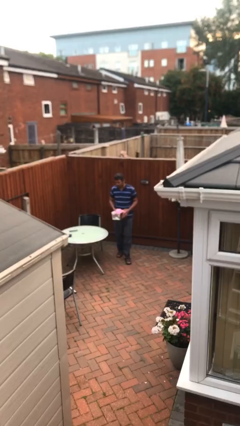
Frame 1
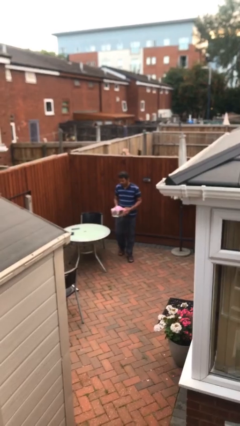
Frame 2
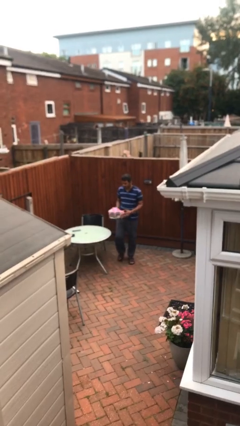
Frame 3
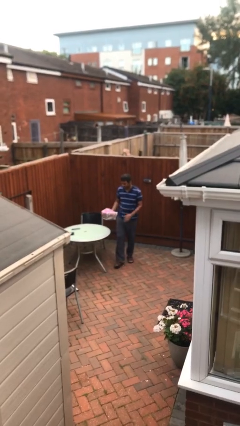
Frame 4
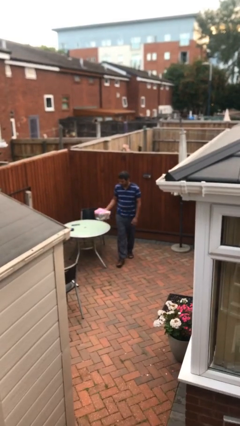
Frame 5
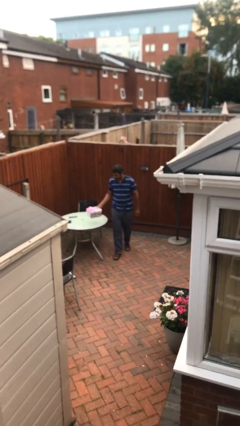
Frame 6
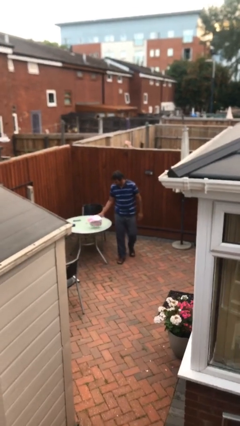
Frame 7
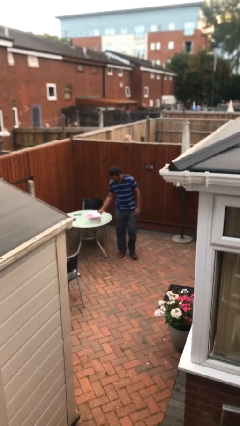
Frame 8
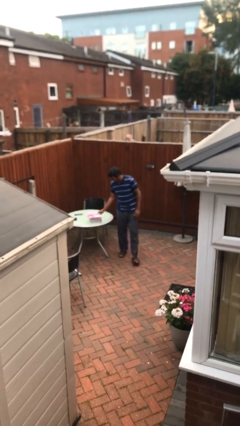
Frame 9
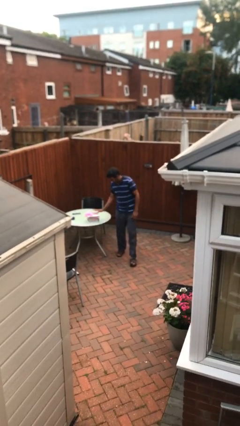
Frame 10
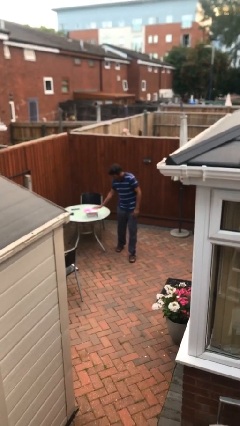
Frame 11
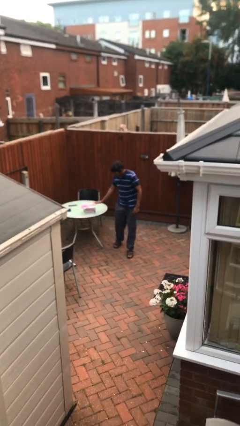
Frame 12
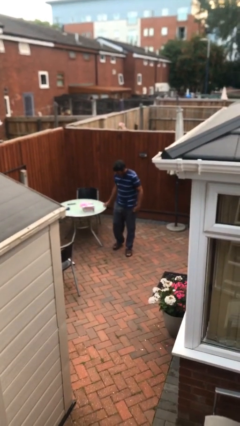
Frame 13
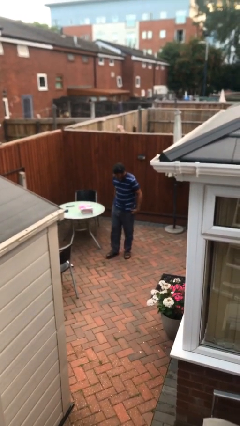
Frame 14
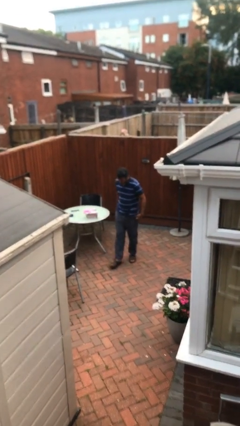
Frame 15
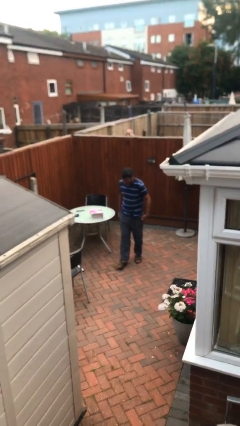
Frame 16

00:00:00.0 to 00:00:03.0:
person puts down object on table

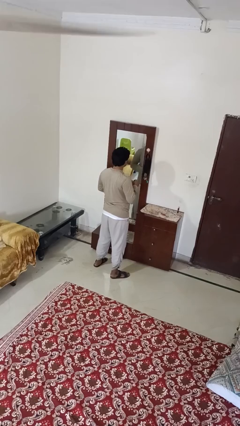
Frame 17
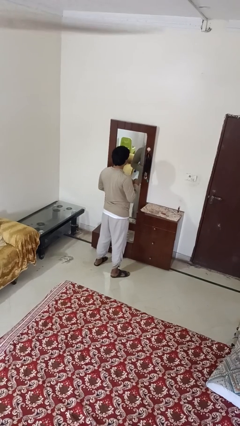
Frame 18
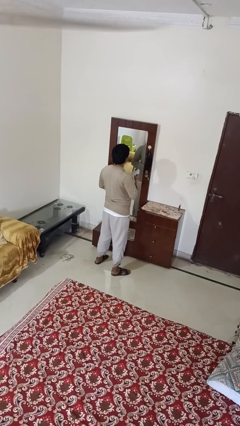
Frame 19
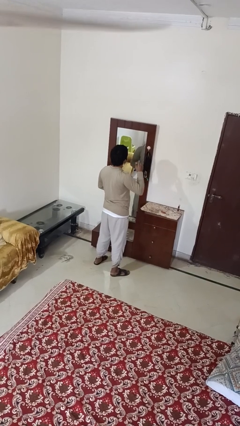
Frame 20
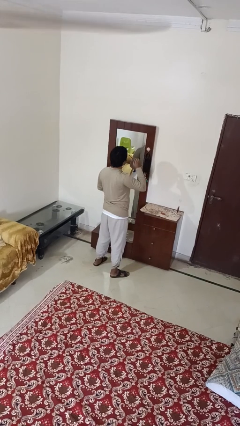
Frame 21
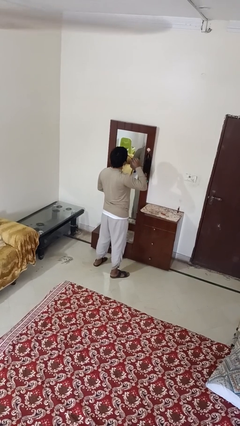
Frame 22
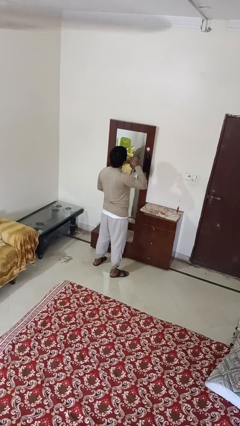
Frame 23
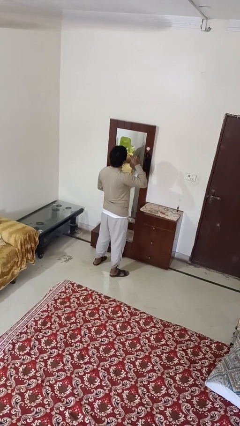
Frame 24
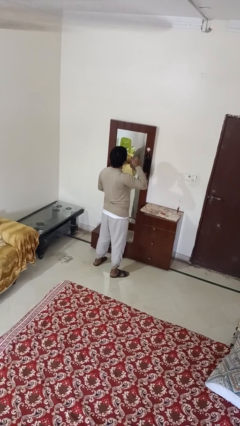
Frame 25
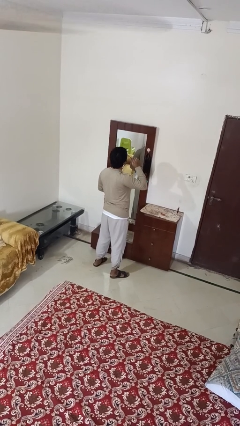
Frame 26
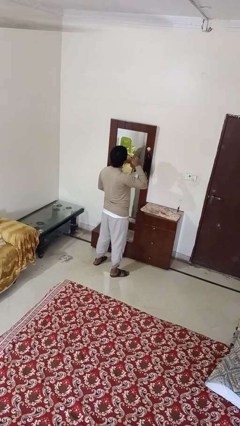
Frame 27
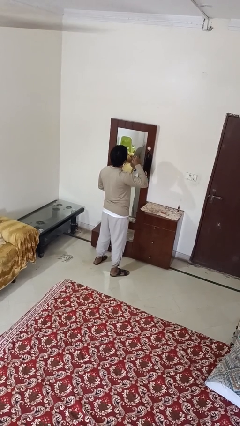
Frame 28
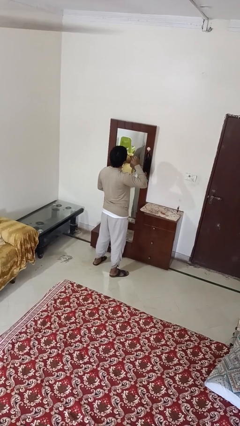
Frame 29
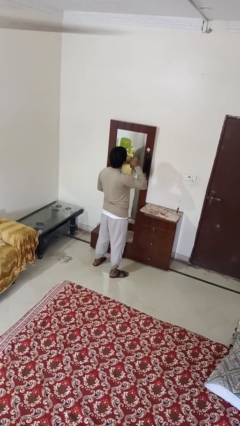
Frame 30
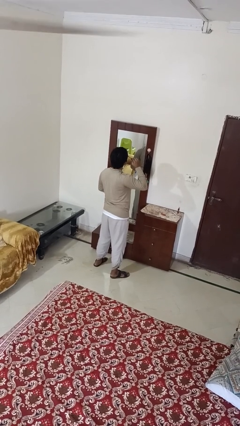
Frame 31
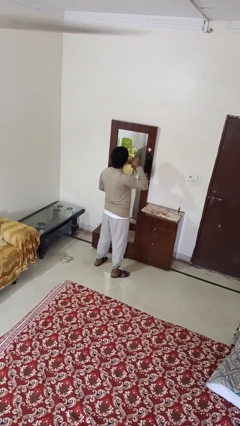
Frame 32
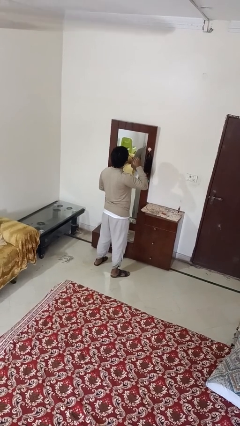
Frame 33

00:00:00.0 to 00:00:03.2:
person applies eye makeup

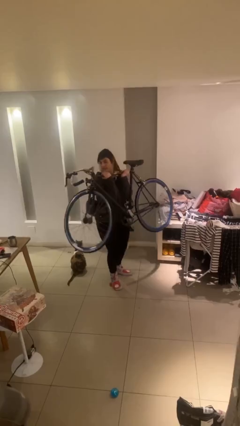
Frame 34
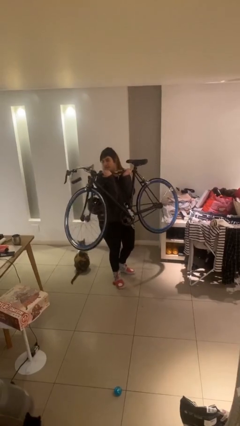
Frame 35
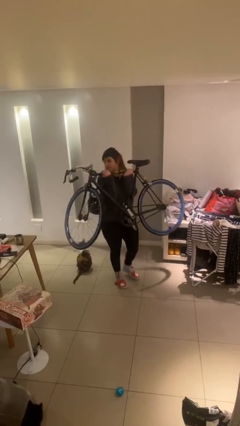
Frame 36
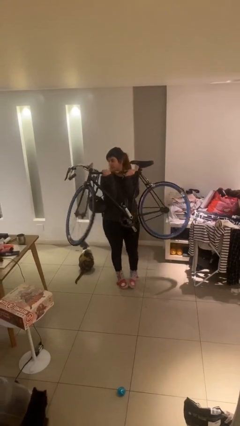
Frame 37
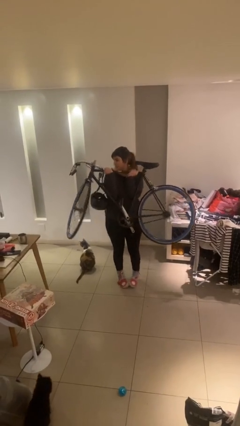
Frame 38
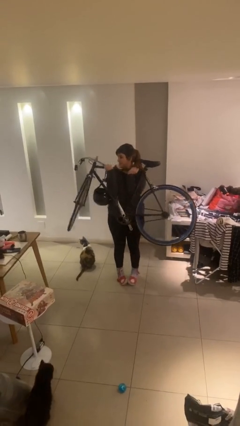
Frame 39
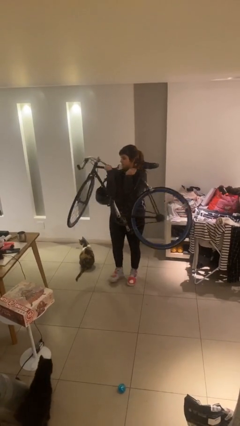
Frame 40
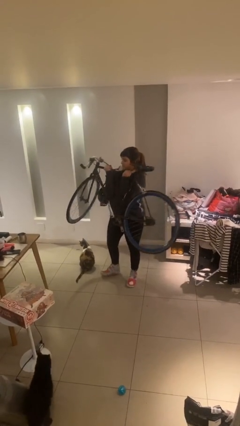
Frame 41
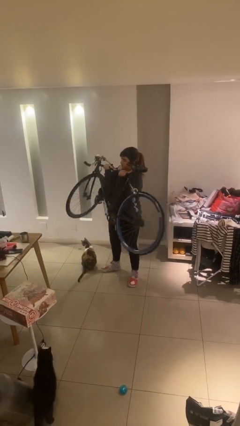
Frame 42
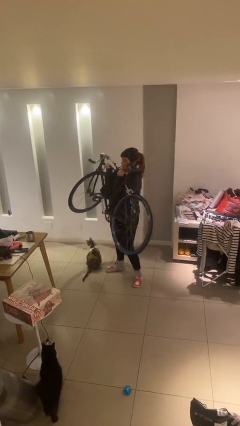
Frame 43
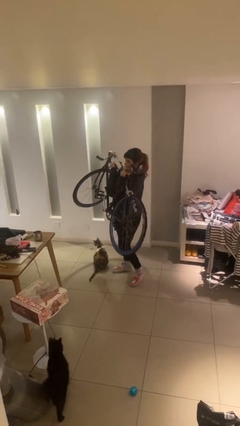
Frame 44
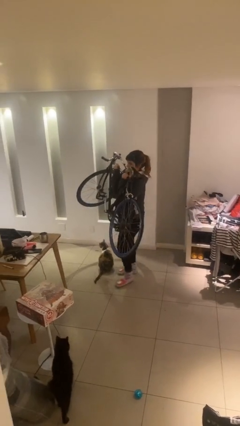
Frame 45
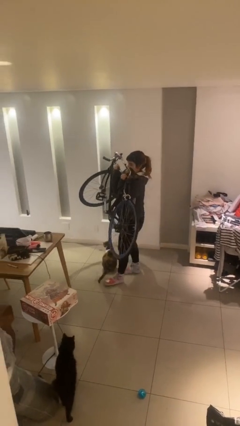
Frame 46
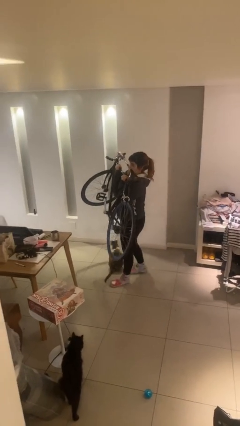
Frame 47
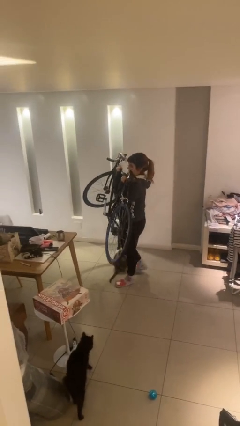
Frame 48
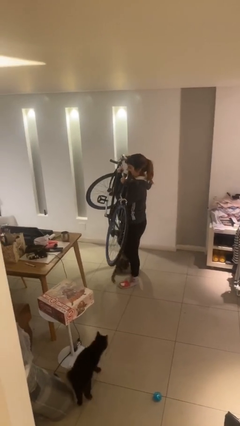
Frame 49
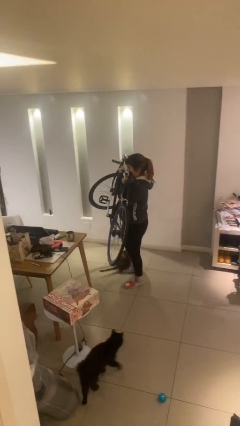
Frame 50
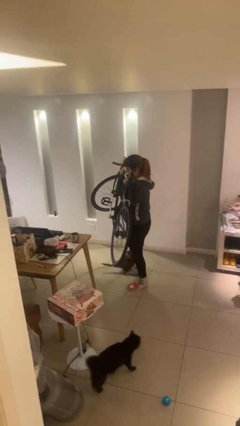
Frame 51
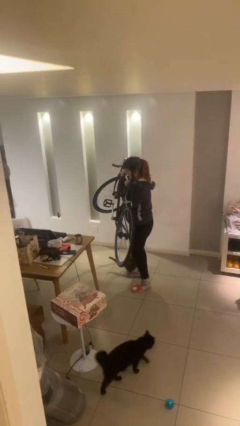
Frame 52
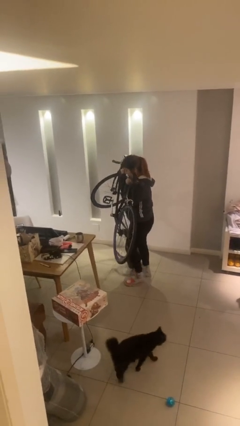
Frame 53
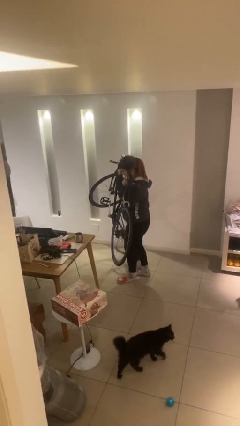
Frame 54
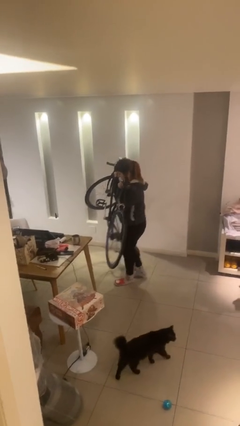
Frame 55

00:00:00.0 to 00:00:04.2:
person carries heavy object

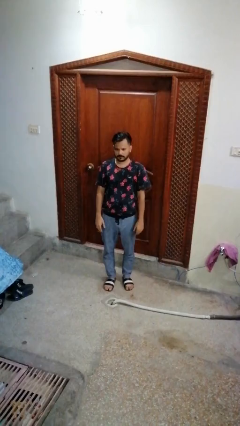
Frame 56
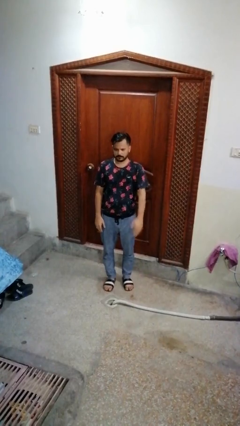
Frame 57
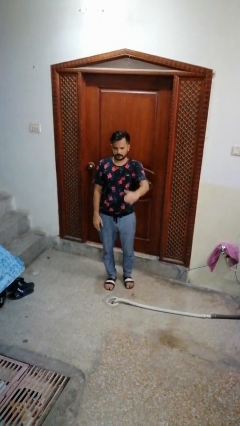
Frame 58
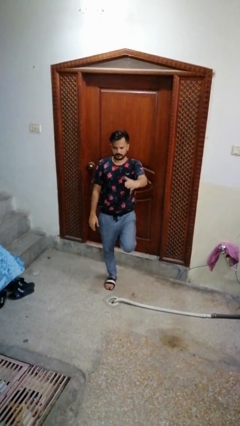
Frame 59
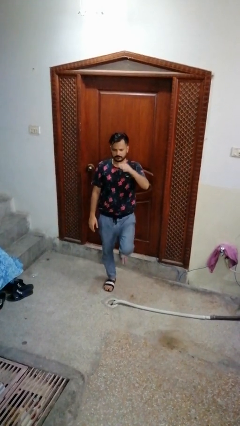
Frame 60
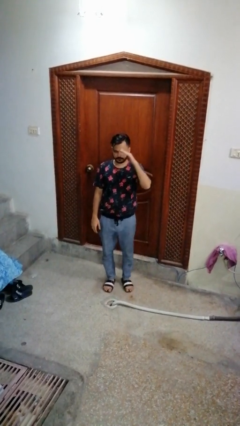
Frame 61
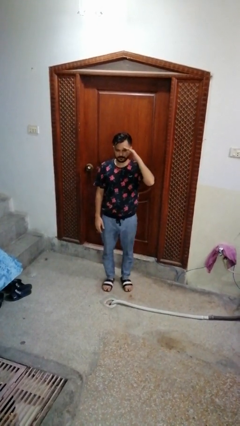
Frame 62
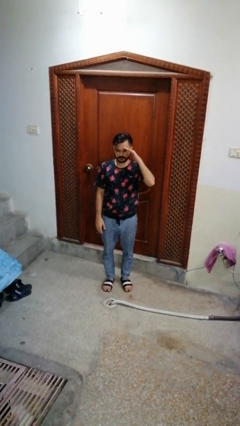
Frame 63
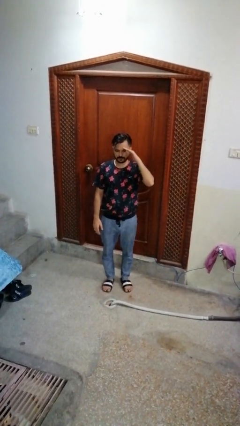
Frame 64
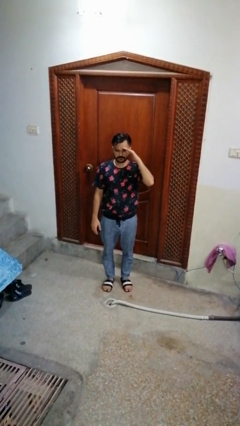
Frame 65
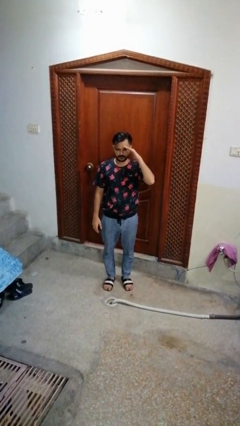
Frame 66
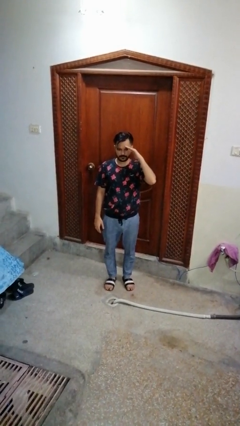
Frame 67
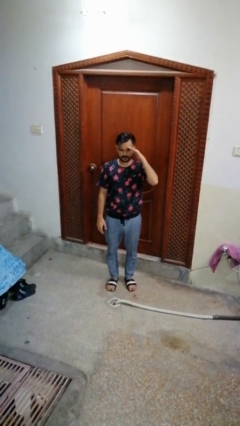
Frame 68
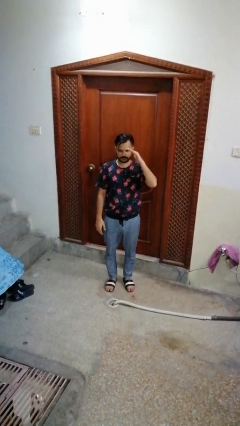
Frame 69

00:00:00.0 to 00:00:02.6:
person salutes

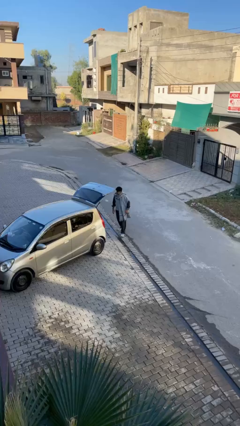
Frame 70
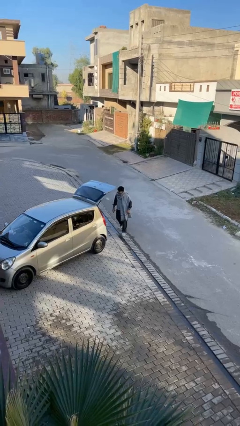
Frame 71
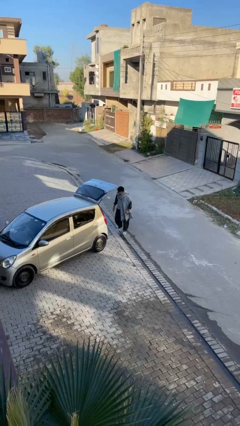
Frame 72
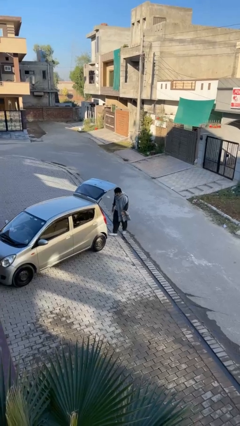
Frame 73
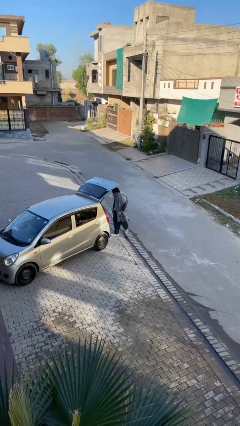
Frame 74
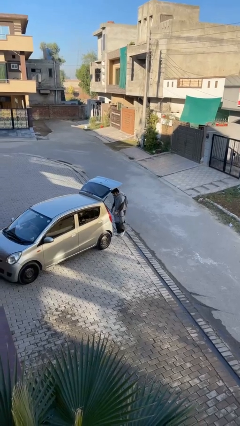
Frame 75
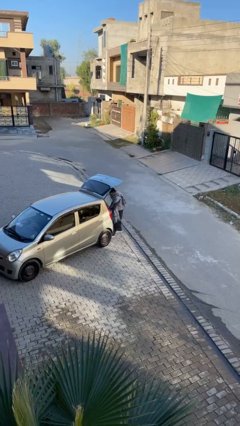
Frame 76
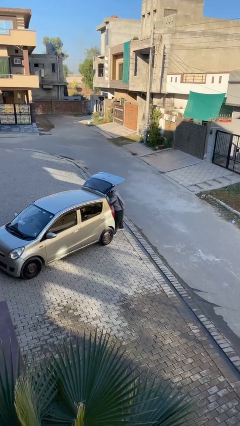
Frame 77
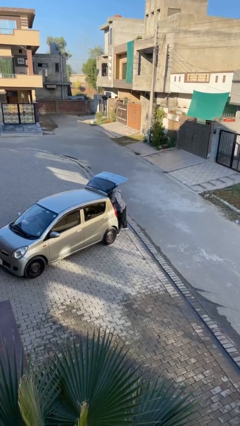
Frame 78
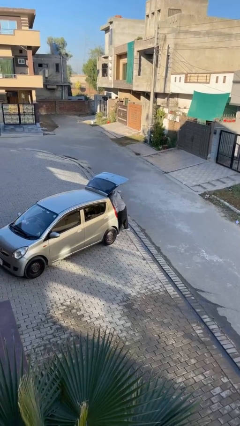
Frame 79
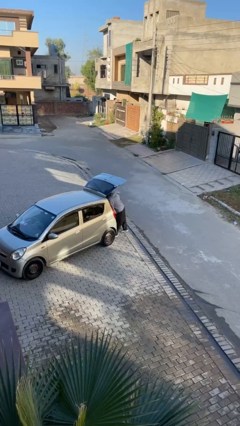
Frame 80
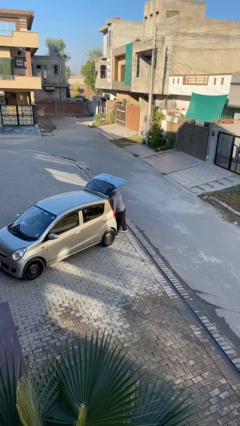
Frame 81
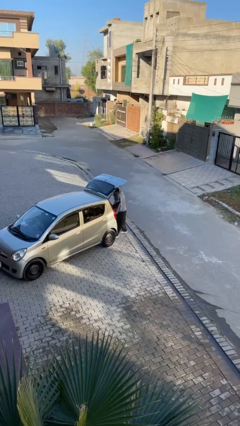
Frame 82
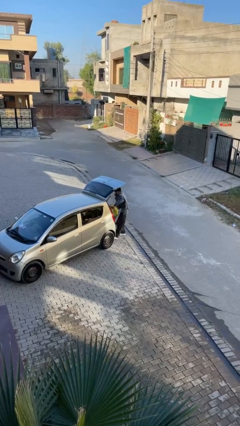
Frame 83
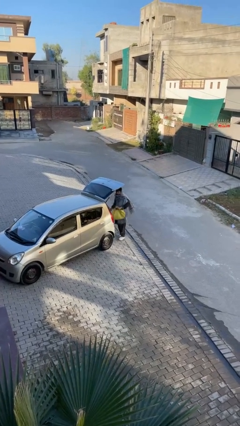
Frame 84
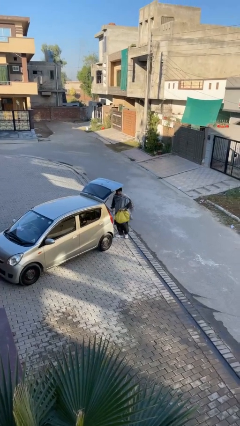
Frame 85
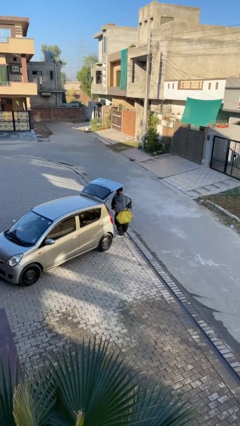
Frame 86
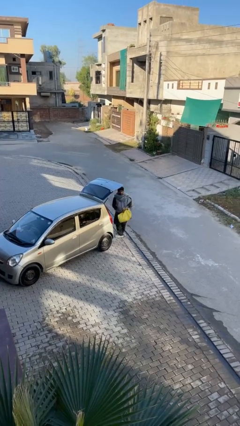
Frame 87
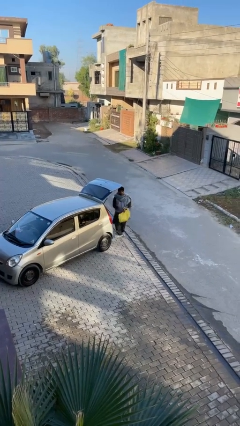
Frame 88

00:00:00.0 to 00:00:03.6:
person unloads car

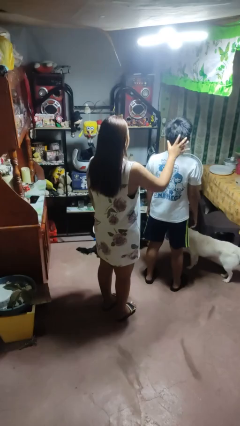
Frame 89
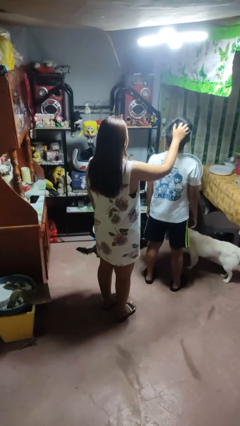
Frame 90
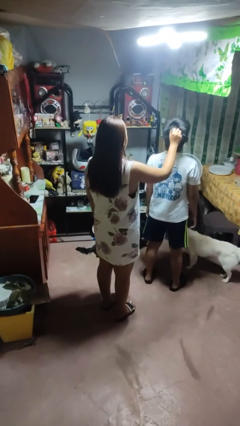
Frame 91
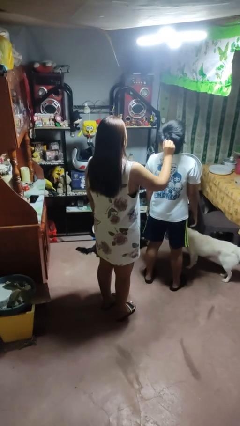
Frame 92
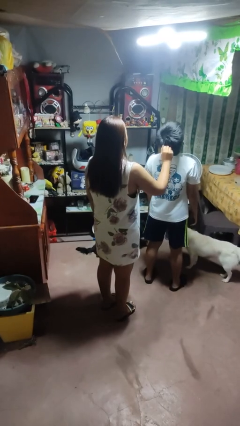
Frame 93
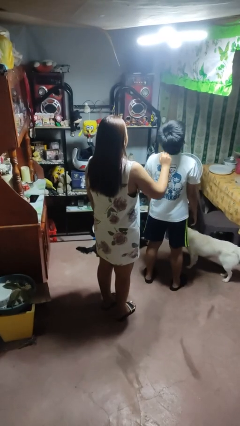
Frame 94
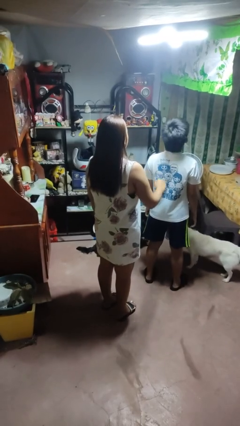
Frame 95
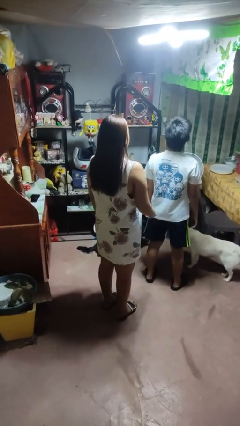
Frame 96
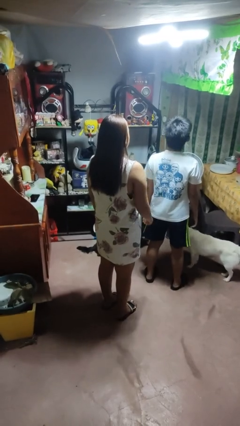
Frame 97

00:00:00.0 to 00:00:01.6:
person grabs person by hair
